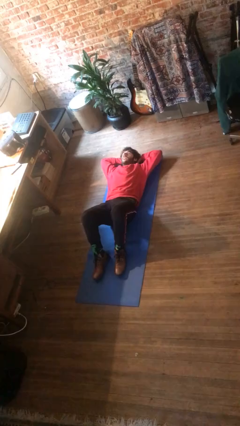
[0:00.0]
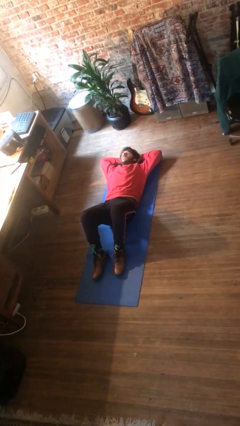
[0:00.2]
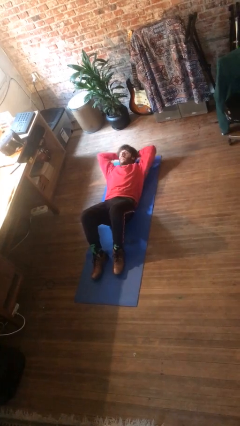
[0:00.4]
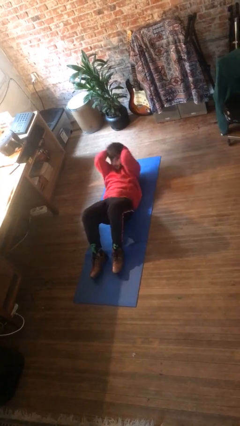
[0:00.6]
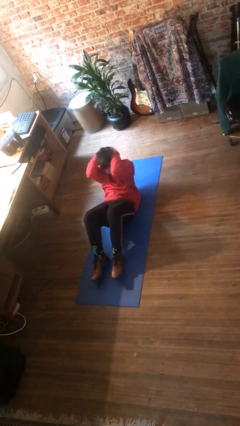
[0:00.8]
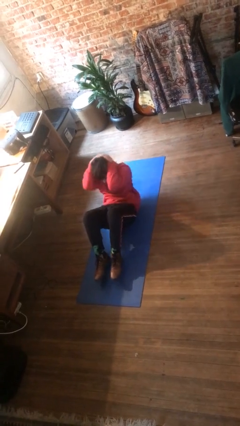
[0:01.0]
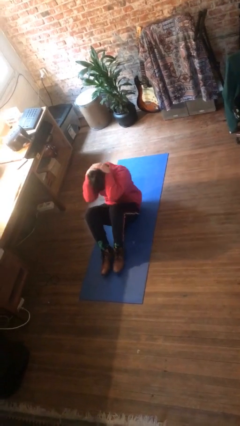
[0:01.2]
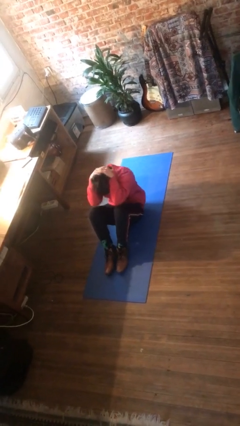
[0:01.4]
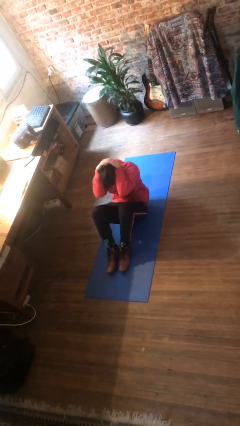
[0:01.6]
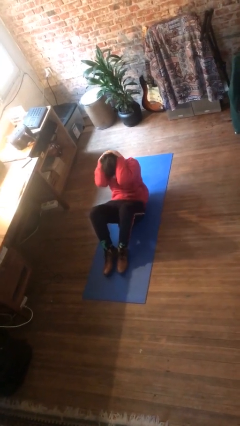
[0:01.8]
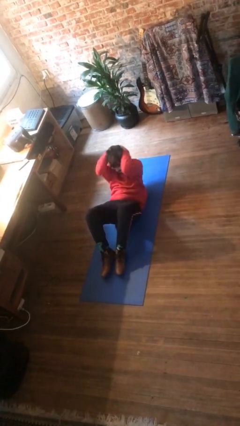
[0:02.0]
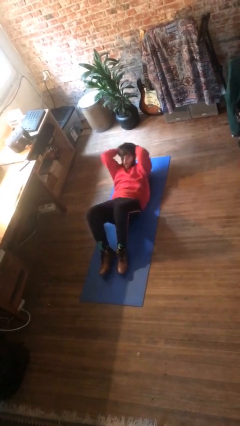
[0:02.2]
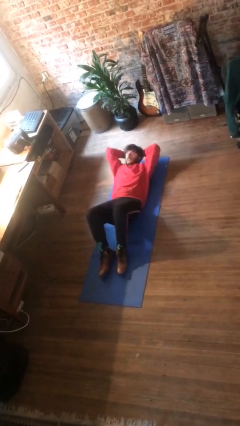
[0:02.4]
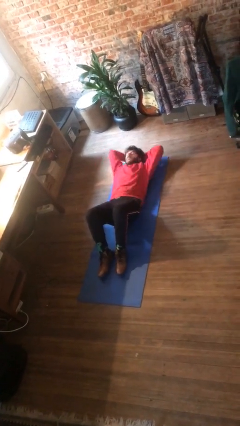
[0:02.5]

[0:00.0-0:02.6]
person exercises with situp

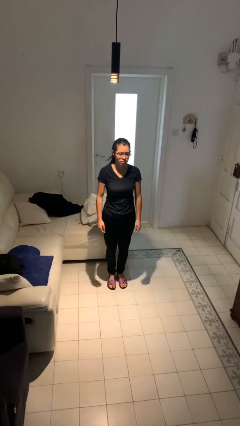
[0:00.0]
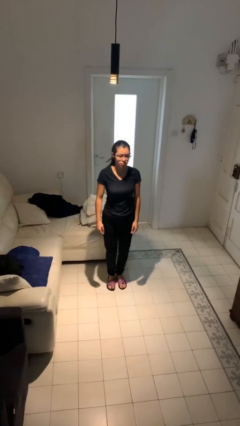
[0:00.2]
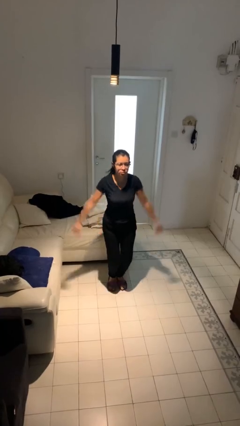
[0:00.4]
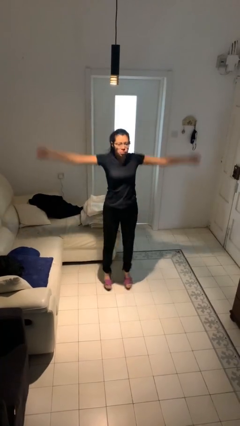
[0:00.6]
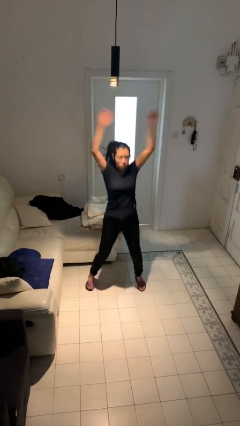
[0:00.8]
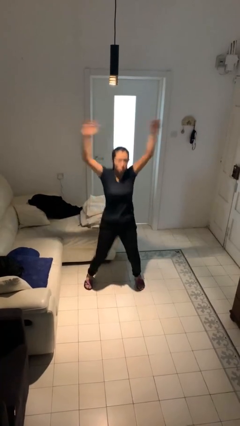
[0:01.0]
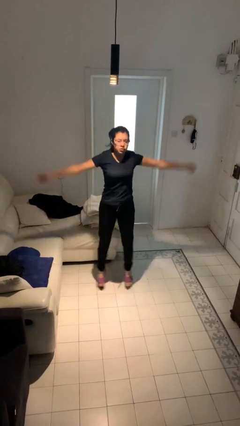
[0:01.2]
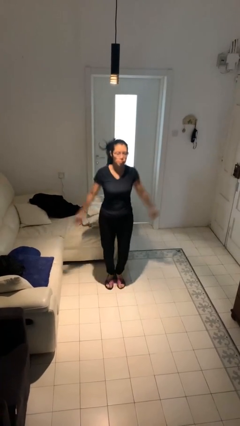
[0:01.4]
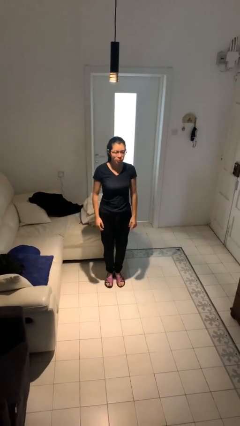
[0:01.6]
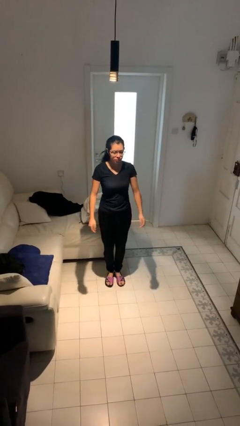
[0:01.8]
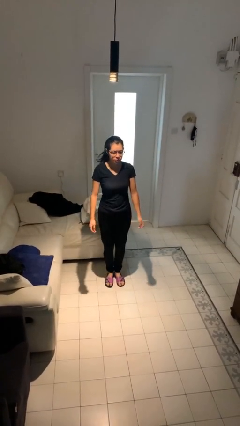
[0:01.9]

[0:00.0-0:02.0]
person jumps

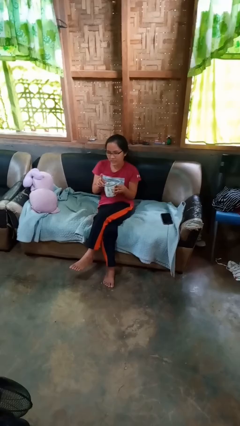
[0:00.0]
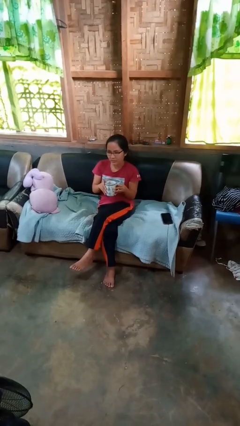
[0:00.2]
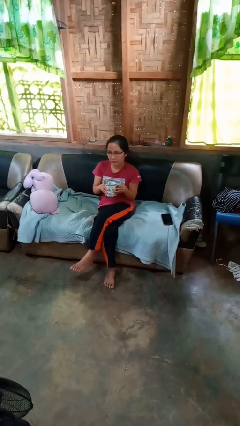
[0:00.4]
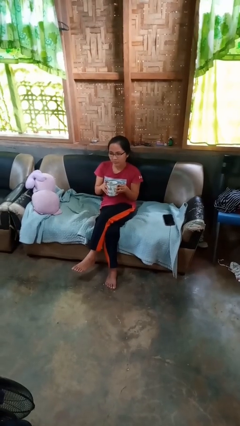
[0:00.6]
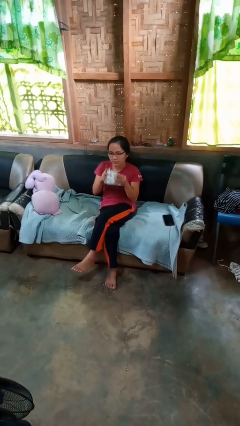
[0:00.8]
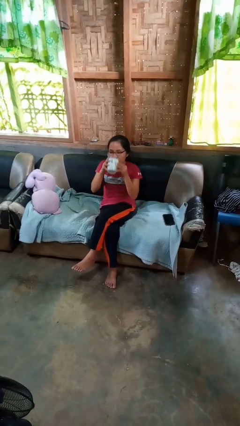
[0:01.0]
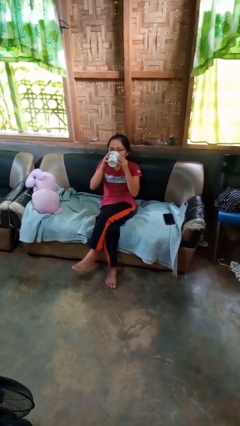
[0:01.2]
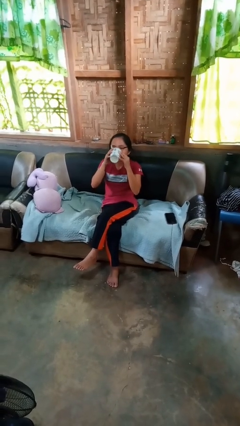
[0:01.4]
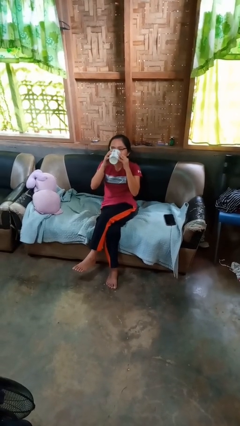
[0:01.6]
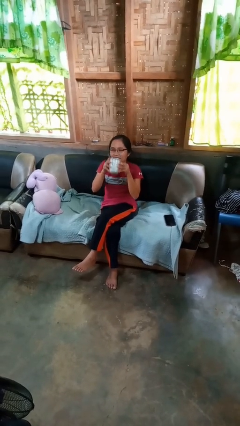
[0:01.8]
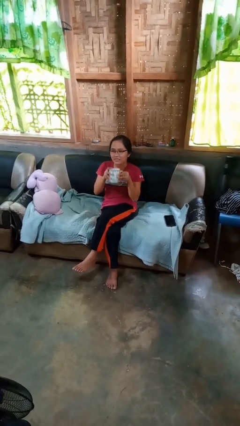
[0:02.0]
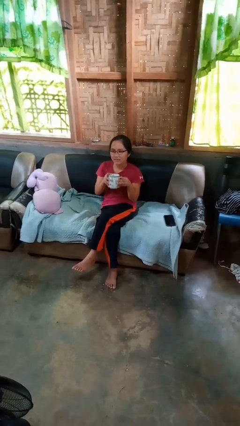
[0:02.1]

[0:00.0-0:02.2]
person drinks from mug

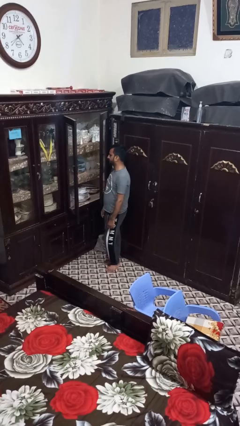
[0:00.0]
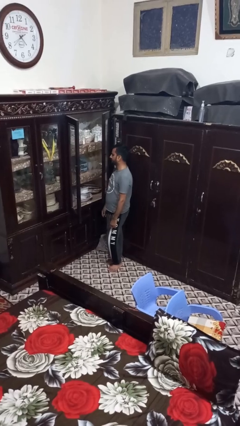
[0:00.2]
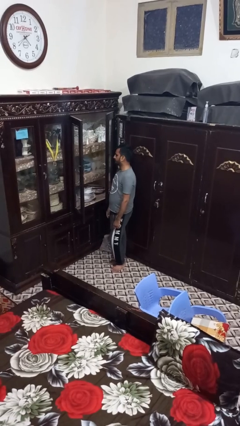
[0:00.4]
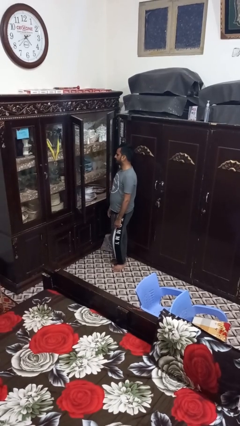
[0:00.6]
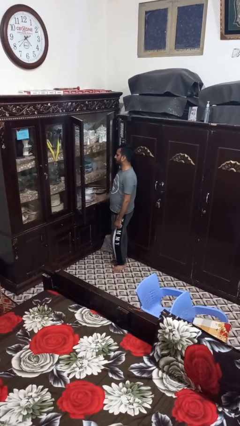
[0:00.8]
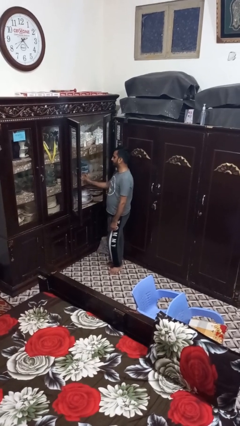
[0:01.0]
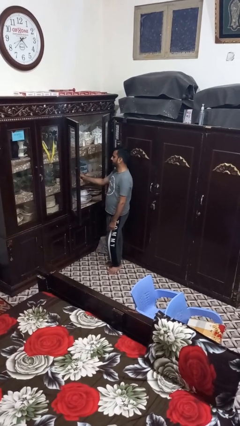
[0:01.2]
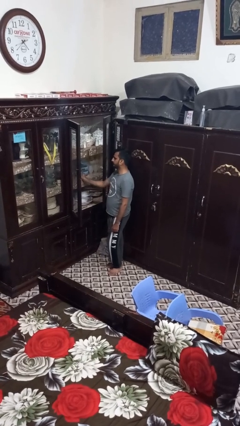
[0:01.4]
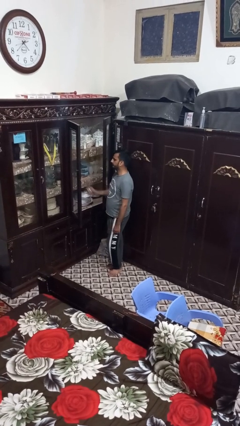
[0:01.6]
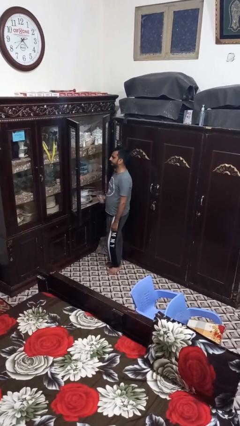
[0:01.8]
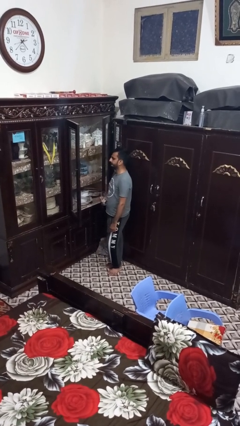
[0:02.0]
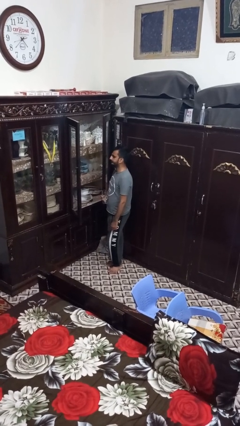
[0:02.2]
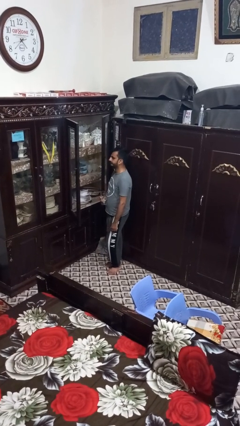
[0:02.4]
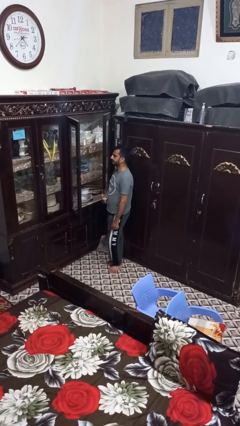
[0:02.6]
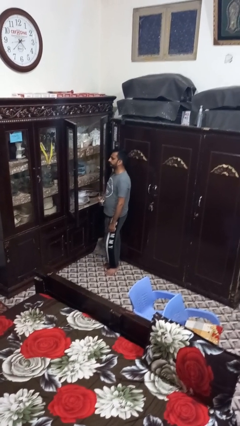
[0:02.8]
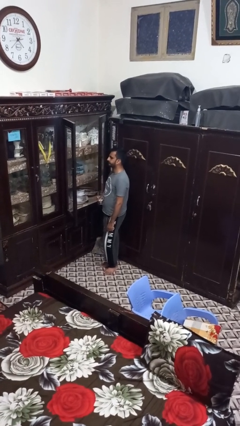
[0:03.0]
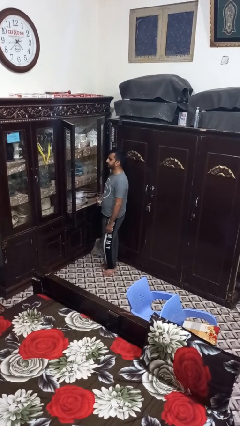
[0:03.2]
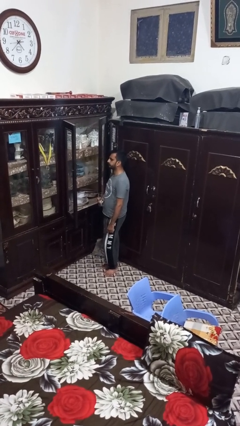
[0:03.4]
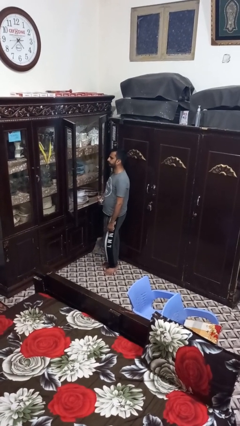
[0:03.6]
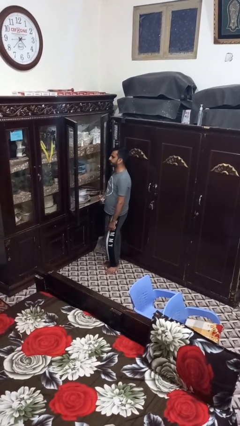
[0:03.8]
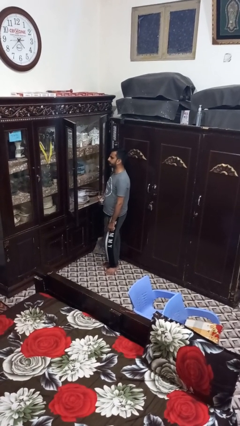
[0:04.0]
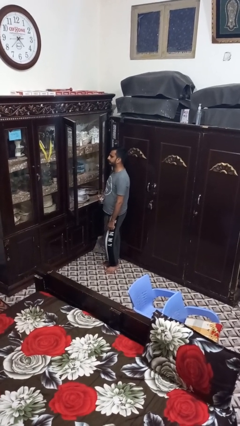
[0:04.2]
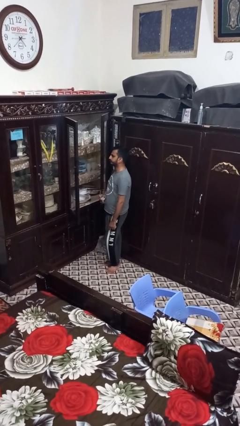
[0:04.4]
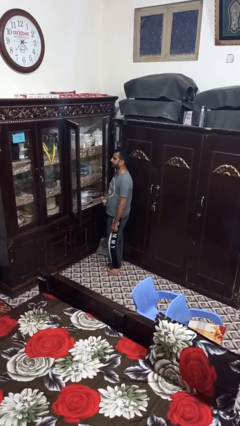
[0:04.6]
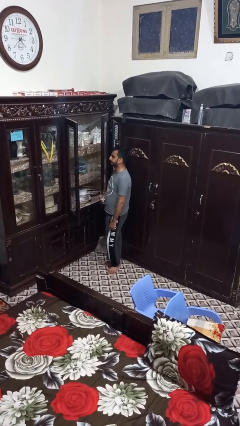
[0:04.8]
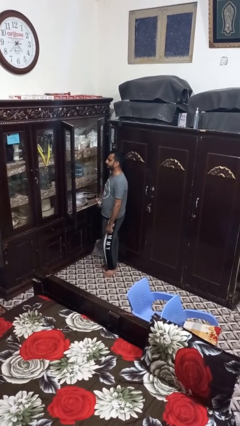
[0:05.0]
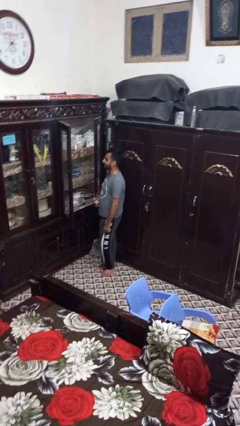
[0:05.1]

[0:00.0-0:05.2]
person picks up object from countertop

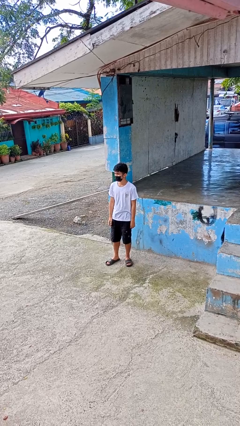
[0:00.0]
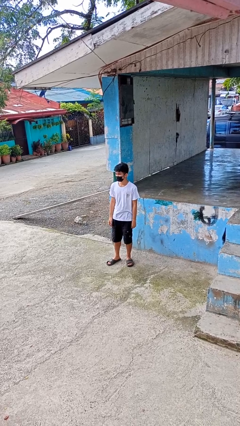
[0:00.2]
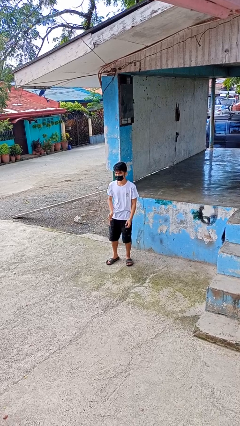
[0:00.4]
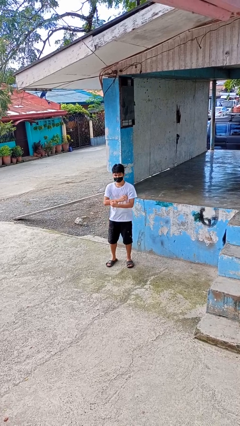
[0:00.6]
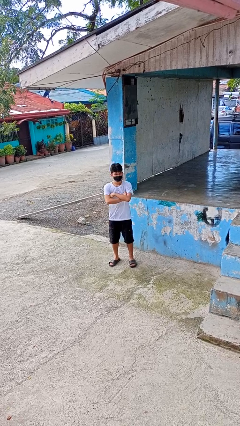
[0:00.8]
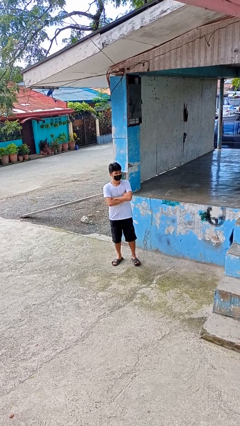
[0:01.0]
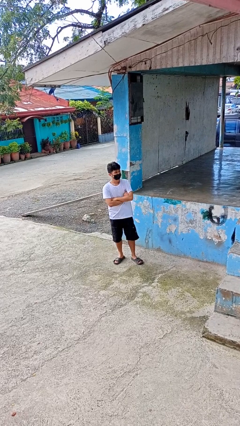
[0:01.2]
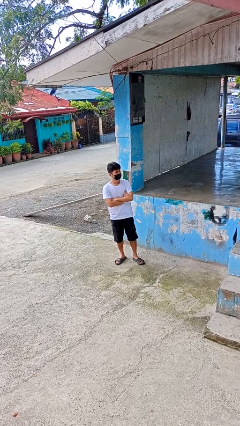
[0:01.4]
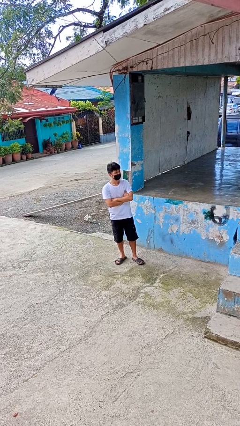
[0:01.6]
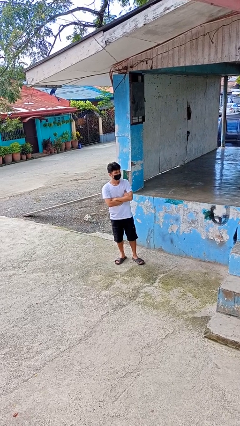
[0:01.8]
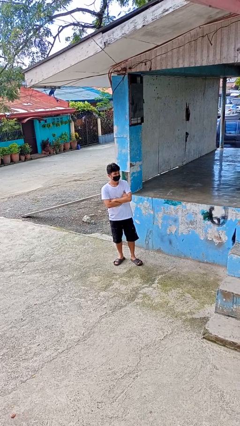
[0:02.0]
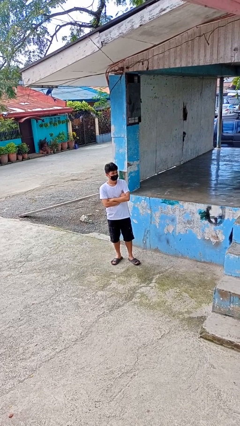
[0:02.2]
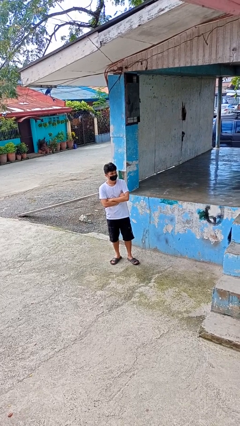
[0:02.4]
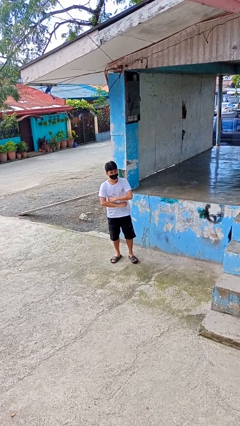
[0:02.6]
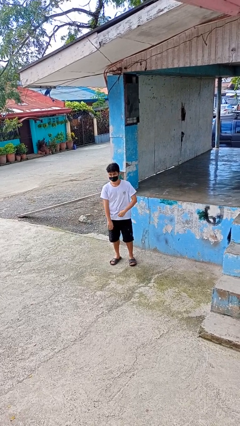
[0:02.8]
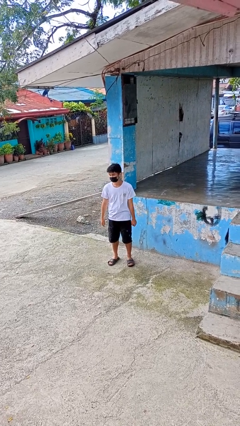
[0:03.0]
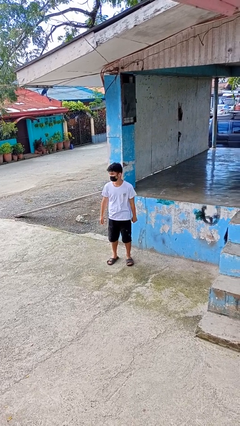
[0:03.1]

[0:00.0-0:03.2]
person crosses arms

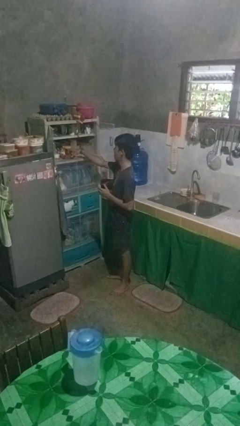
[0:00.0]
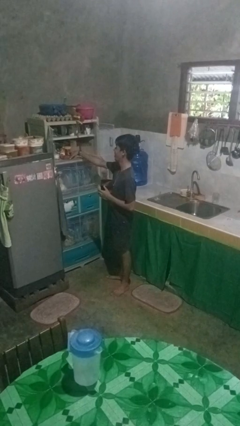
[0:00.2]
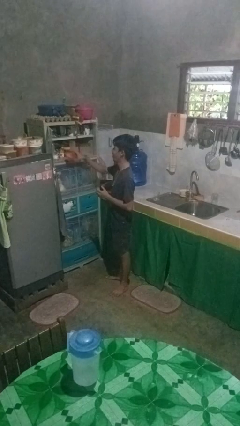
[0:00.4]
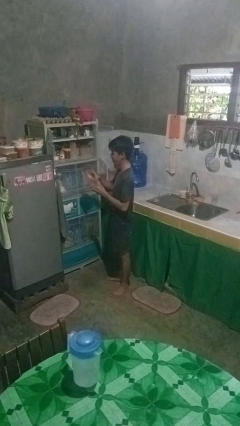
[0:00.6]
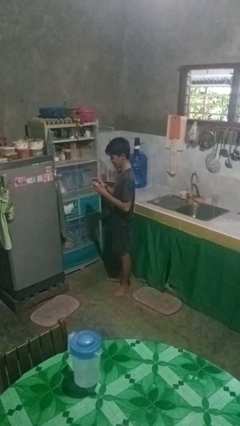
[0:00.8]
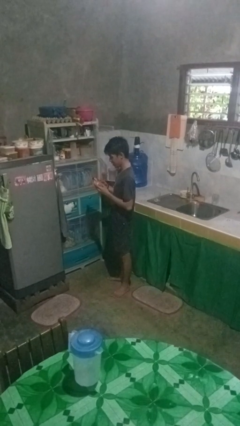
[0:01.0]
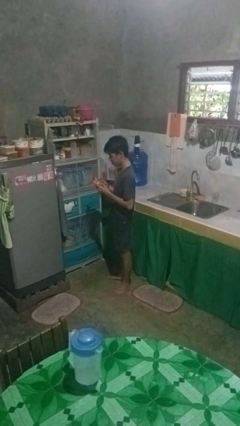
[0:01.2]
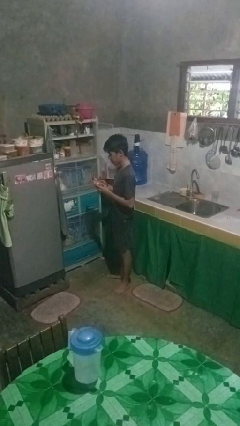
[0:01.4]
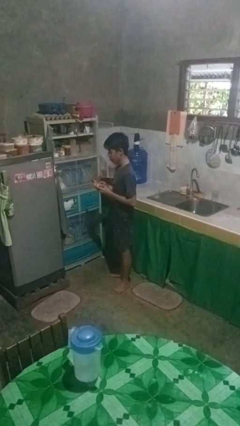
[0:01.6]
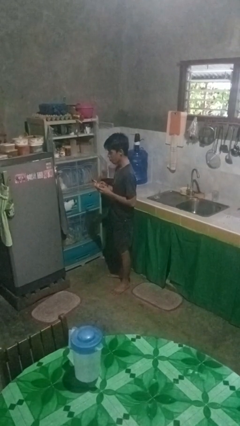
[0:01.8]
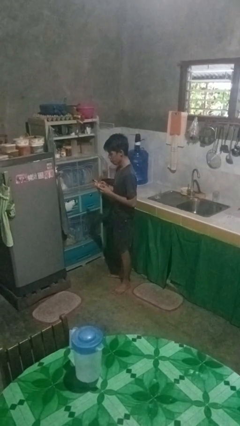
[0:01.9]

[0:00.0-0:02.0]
person takes object from cabinet

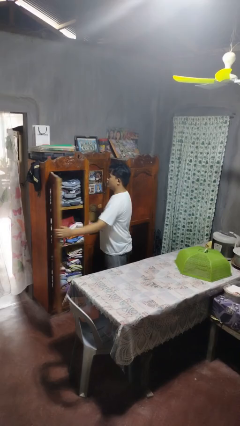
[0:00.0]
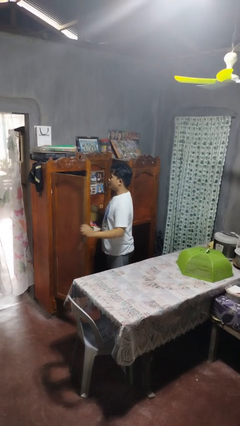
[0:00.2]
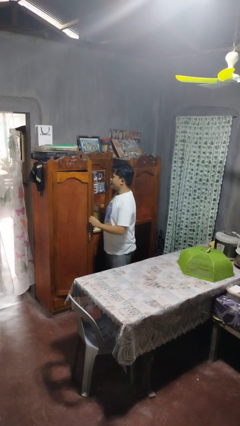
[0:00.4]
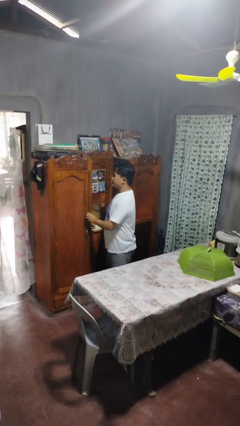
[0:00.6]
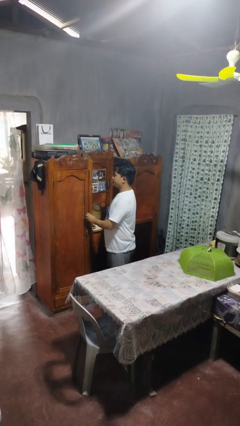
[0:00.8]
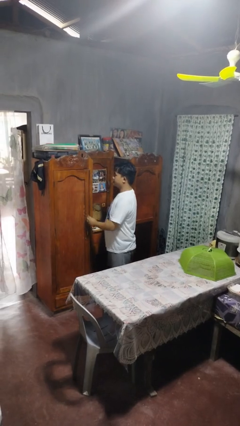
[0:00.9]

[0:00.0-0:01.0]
person closes closet door
